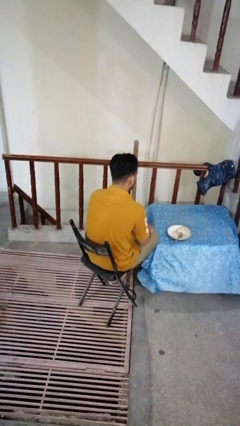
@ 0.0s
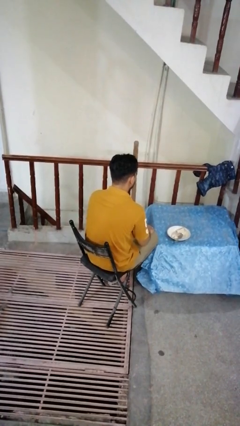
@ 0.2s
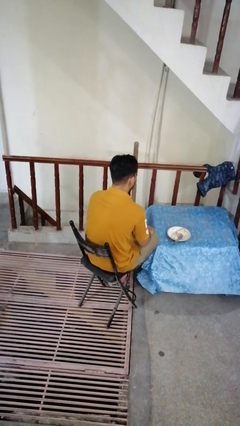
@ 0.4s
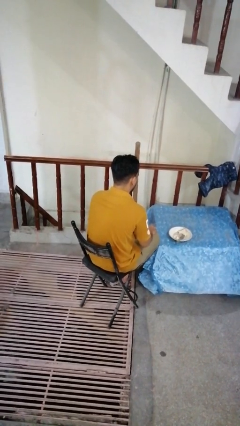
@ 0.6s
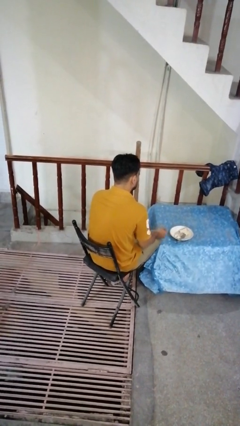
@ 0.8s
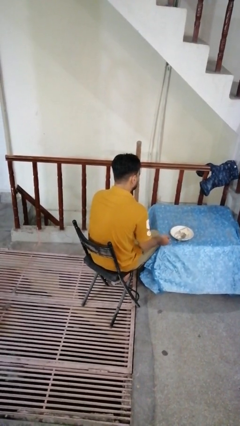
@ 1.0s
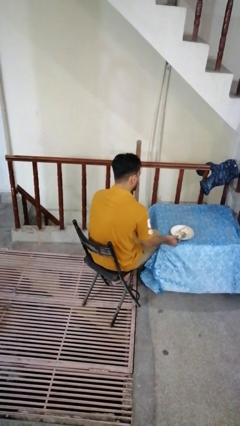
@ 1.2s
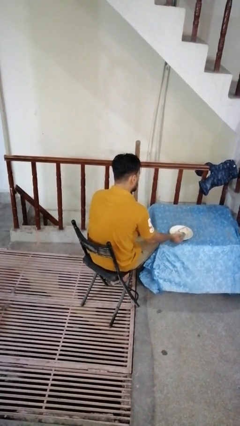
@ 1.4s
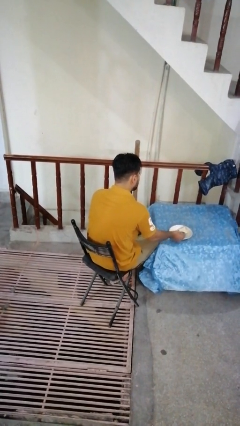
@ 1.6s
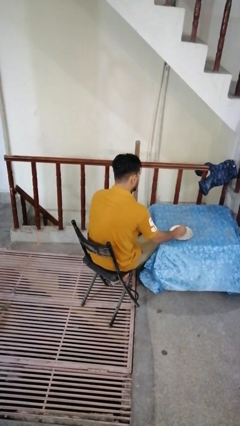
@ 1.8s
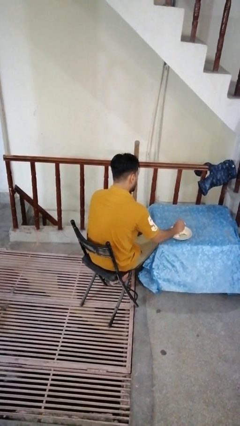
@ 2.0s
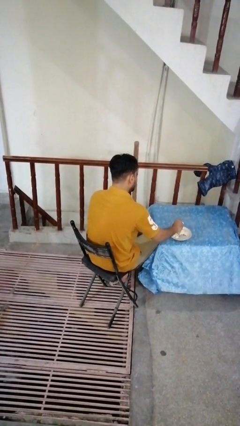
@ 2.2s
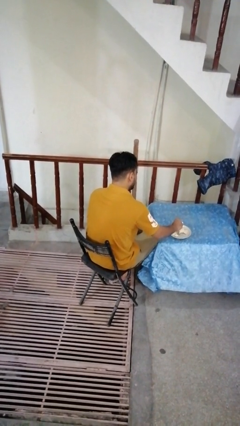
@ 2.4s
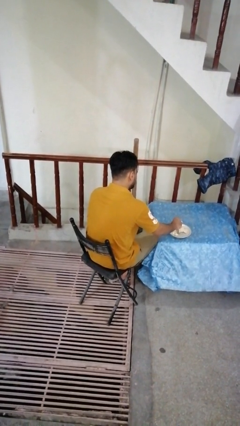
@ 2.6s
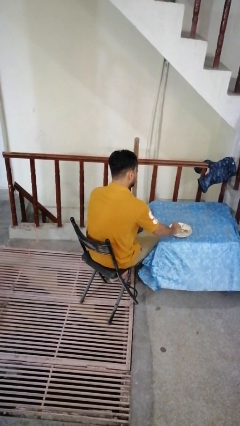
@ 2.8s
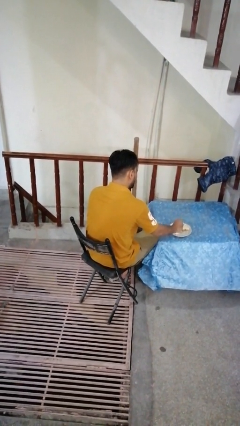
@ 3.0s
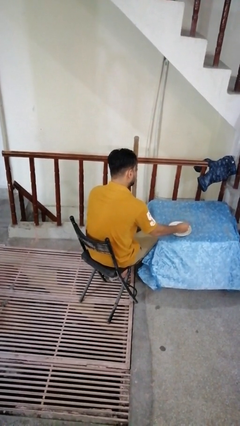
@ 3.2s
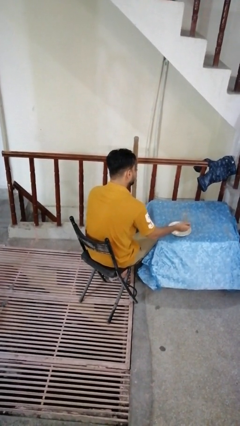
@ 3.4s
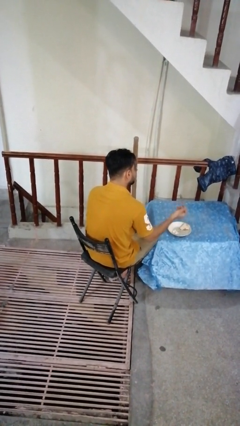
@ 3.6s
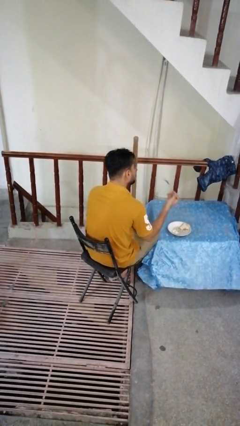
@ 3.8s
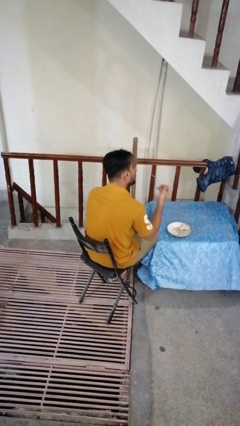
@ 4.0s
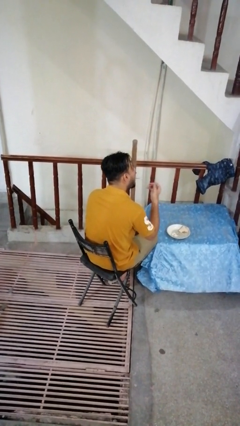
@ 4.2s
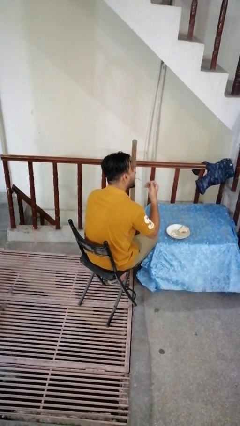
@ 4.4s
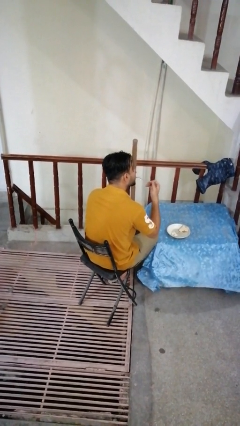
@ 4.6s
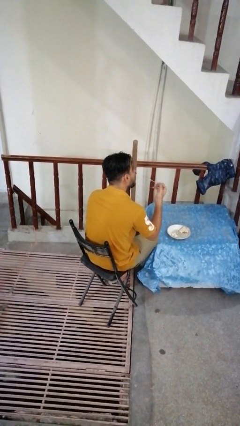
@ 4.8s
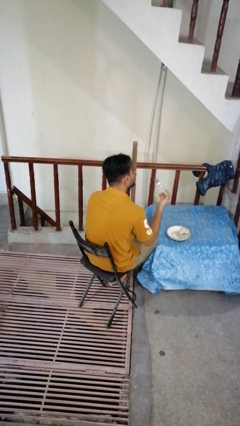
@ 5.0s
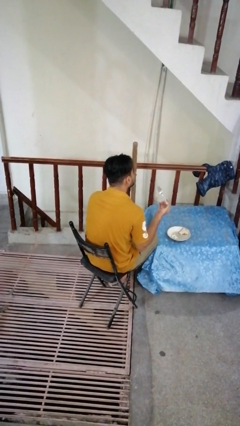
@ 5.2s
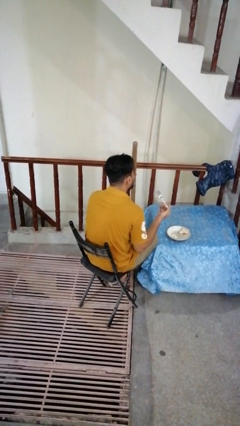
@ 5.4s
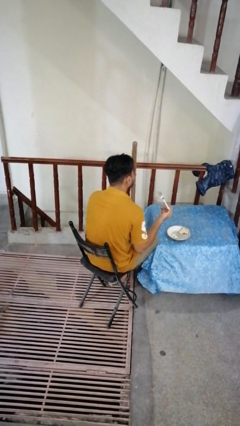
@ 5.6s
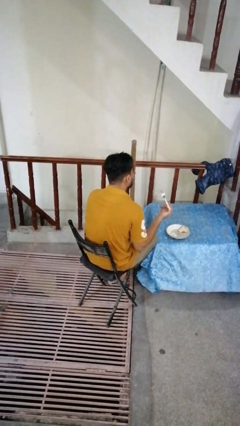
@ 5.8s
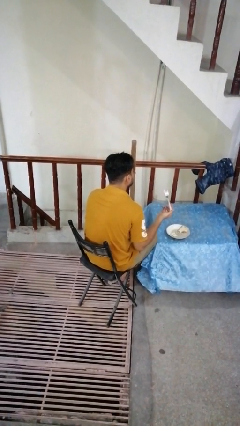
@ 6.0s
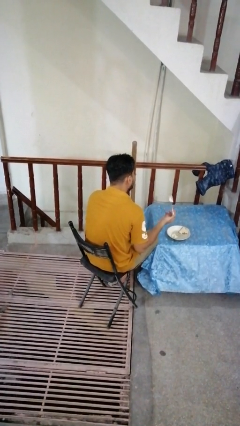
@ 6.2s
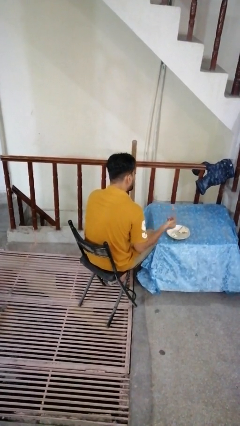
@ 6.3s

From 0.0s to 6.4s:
person eats with utensil

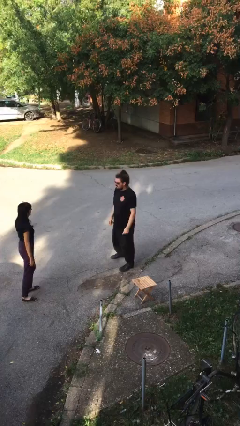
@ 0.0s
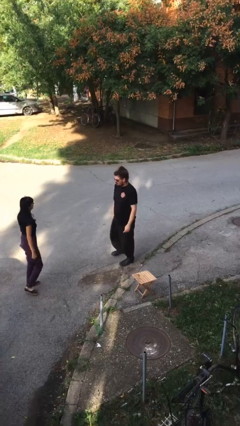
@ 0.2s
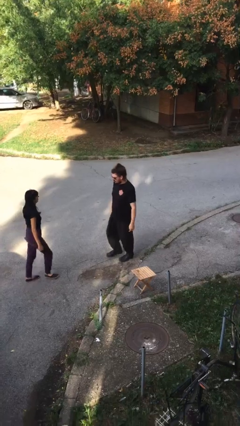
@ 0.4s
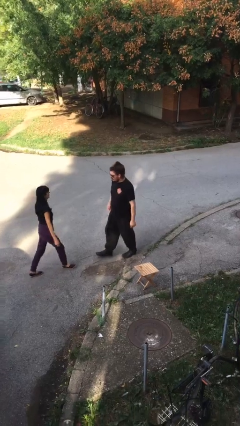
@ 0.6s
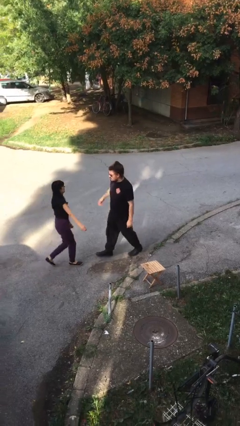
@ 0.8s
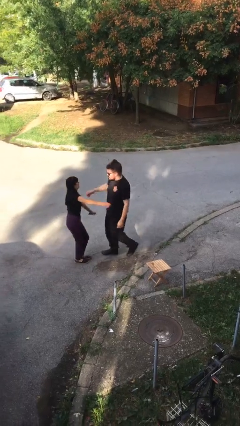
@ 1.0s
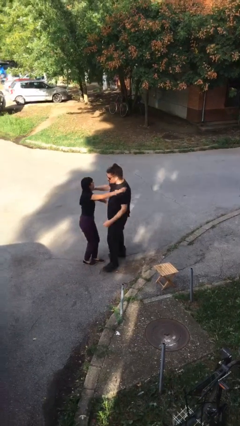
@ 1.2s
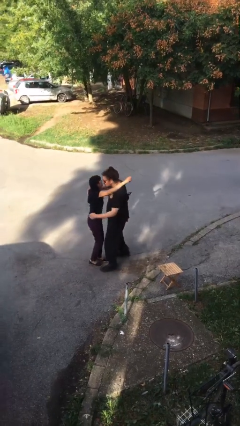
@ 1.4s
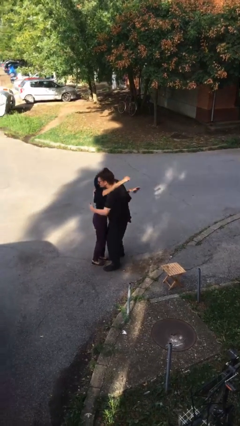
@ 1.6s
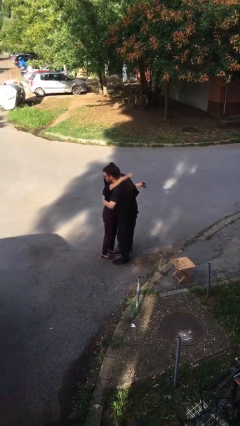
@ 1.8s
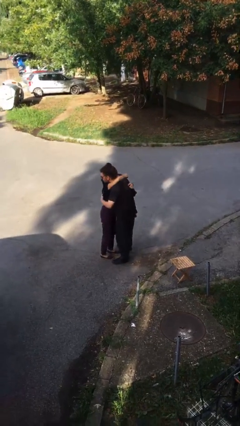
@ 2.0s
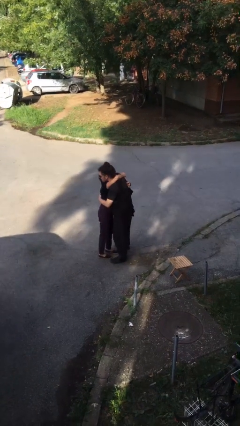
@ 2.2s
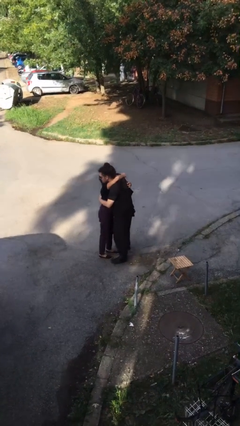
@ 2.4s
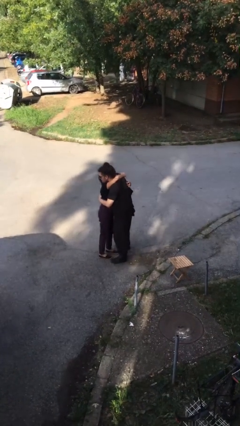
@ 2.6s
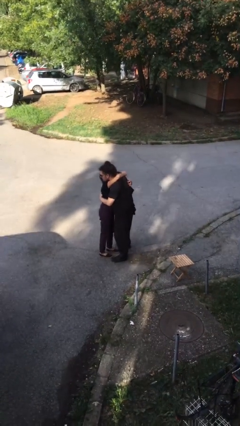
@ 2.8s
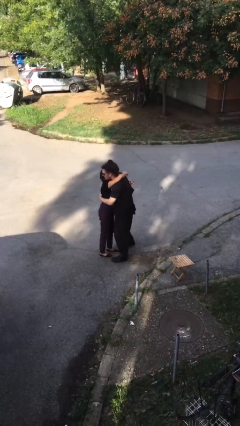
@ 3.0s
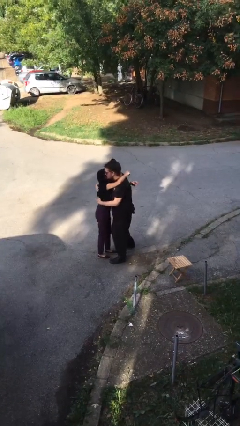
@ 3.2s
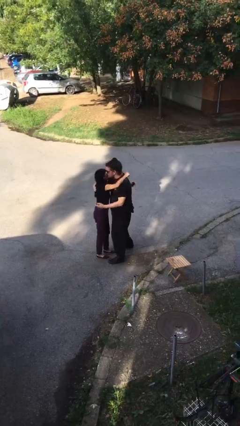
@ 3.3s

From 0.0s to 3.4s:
person embraces person

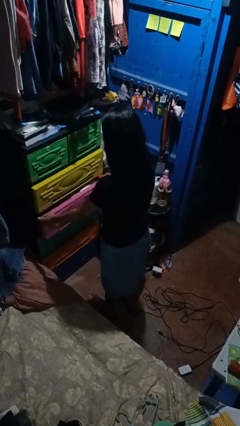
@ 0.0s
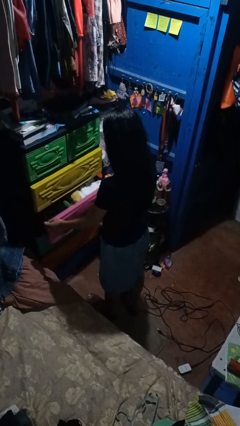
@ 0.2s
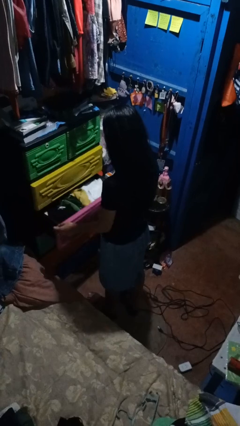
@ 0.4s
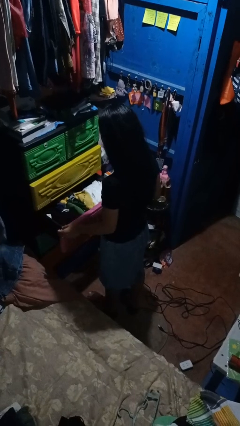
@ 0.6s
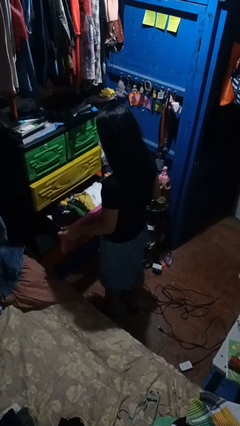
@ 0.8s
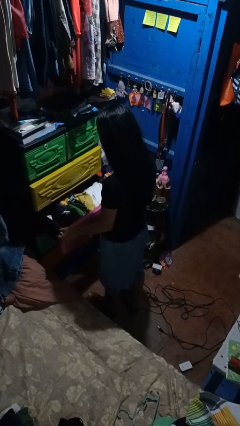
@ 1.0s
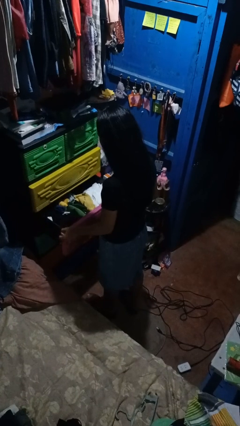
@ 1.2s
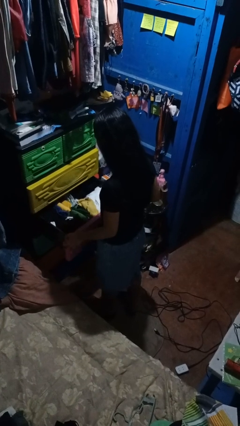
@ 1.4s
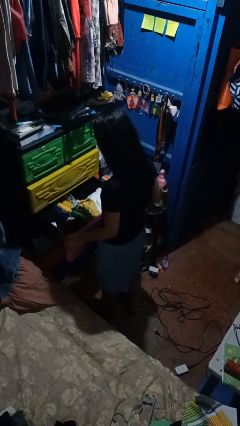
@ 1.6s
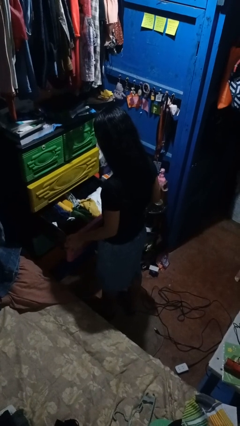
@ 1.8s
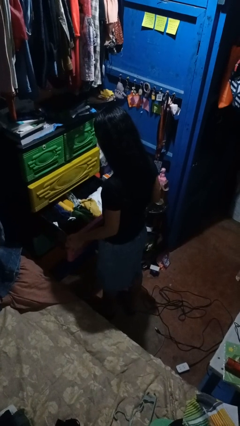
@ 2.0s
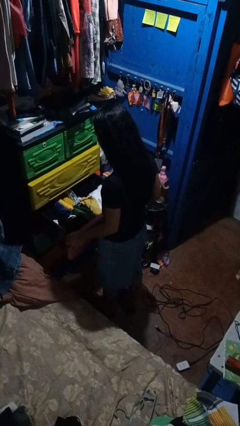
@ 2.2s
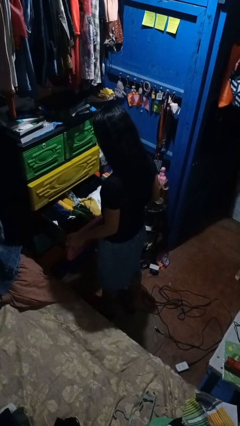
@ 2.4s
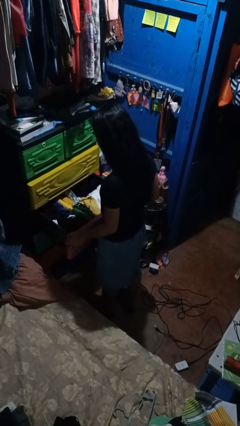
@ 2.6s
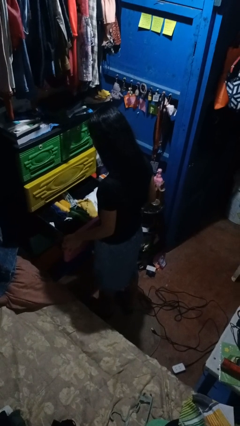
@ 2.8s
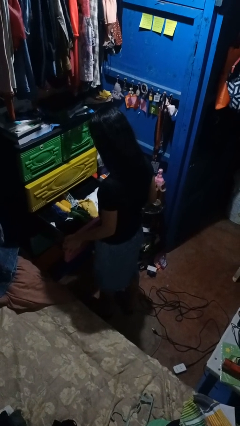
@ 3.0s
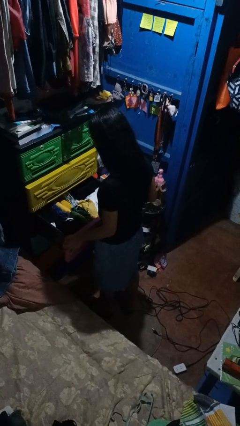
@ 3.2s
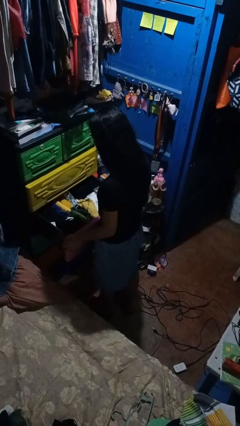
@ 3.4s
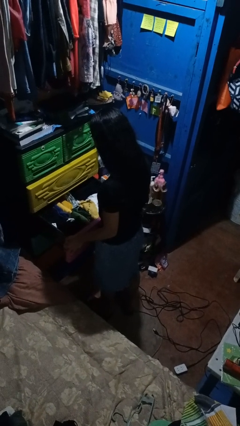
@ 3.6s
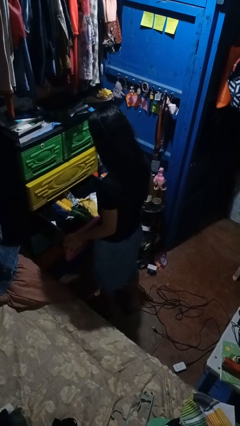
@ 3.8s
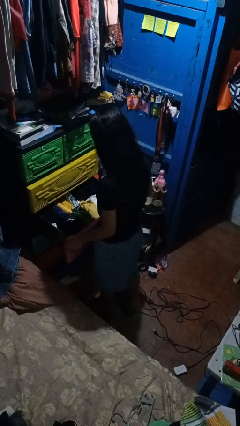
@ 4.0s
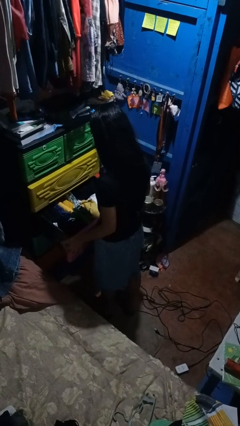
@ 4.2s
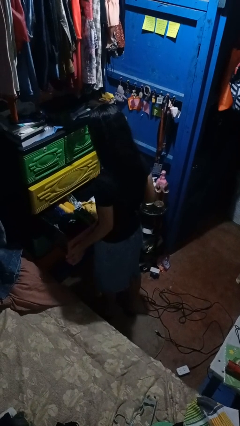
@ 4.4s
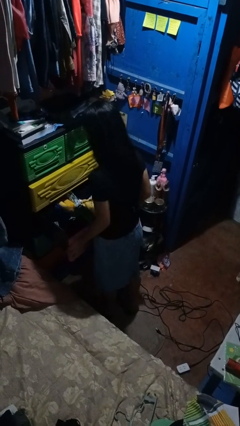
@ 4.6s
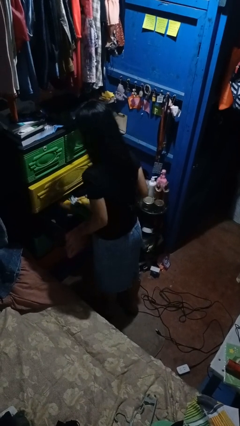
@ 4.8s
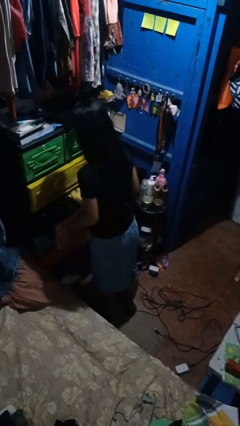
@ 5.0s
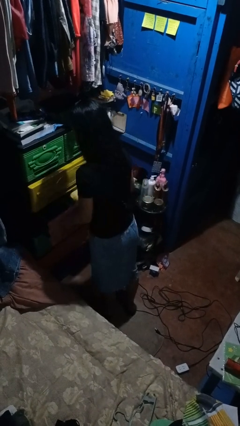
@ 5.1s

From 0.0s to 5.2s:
person opens dresser drawer

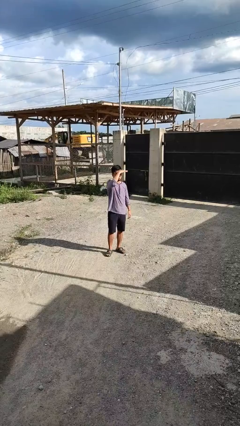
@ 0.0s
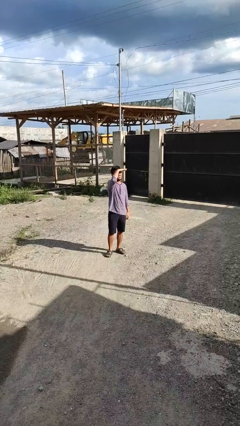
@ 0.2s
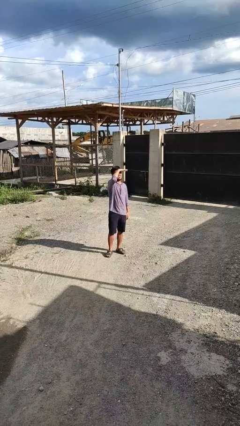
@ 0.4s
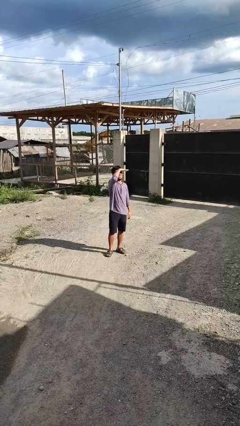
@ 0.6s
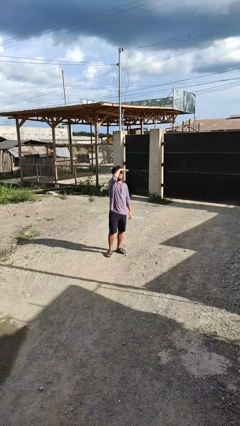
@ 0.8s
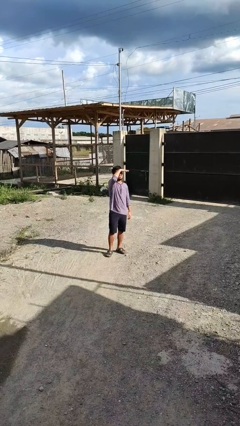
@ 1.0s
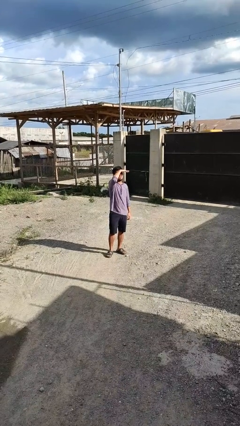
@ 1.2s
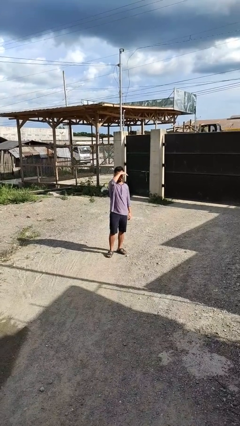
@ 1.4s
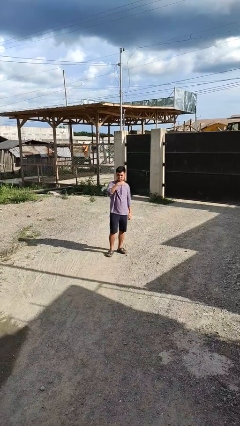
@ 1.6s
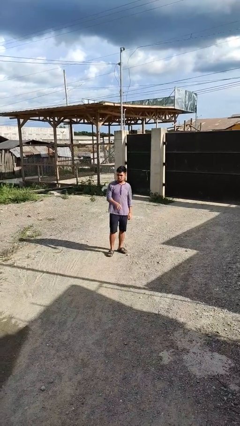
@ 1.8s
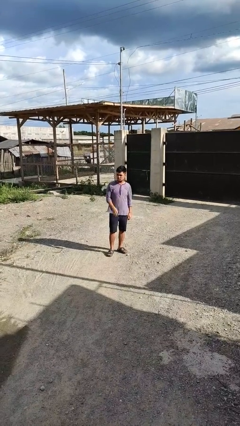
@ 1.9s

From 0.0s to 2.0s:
person shades eyes

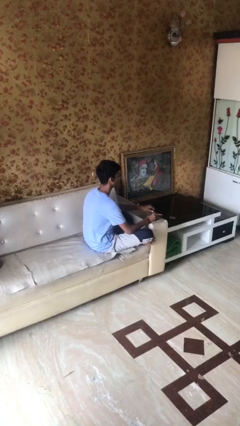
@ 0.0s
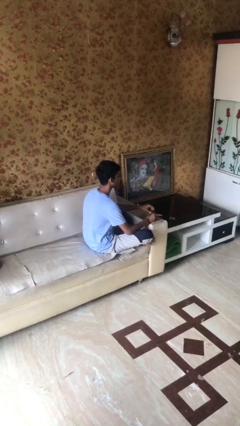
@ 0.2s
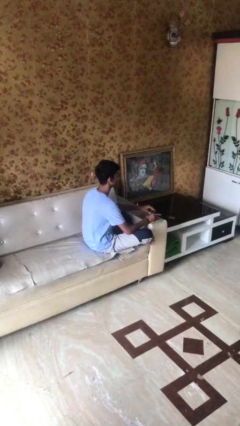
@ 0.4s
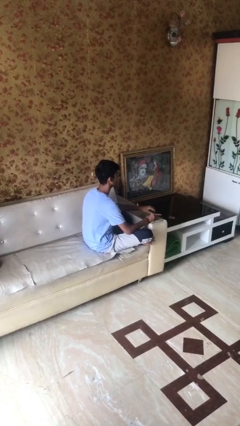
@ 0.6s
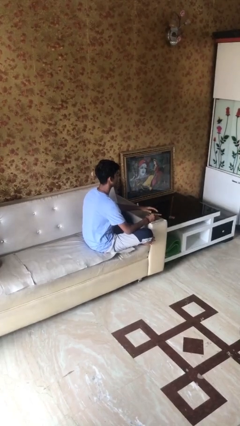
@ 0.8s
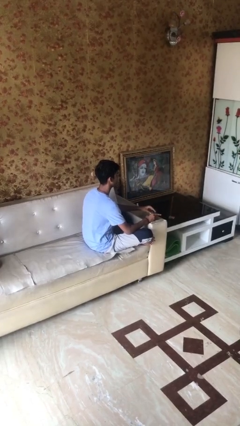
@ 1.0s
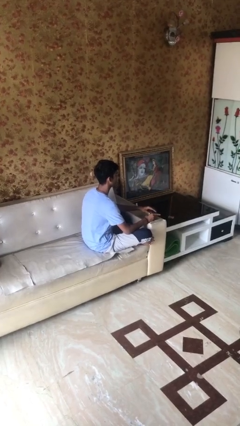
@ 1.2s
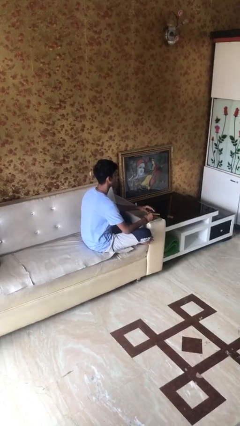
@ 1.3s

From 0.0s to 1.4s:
person opens jar
